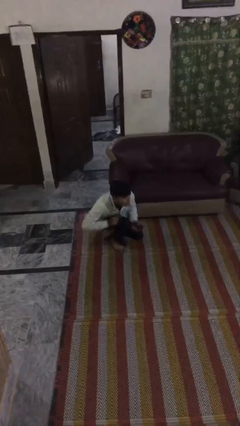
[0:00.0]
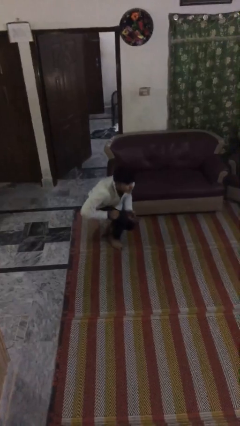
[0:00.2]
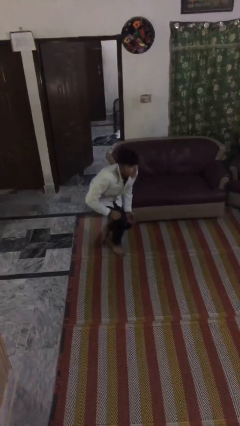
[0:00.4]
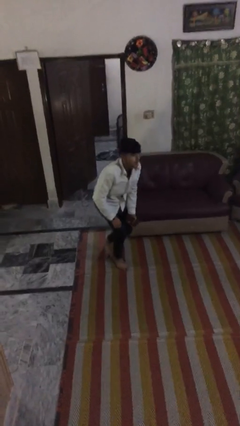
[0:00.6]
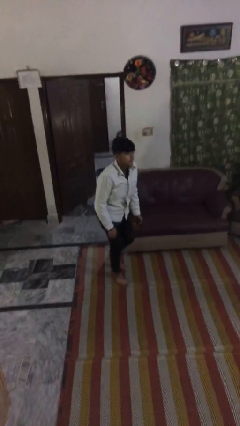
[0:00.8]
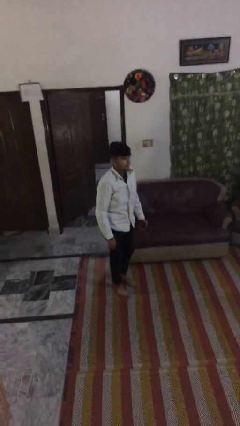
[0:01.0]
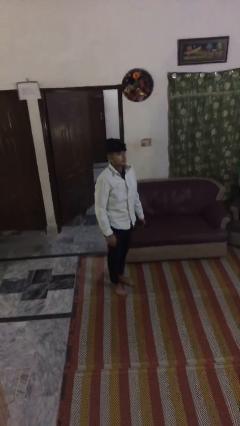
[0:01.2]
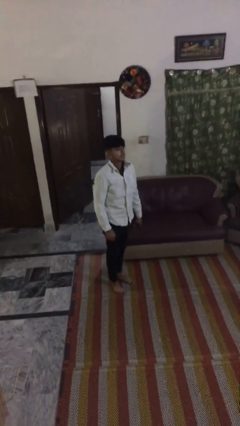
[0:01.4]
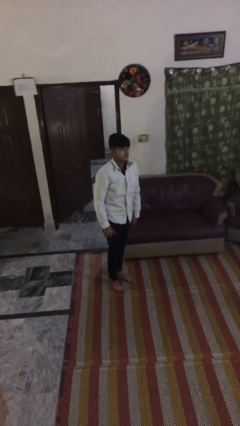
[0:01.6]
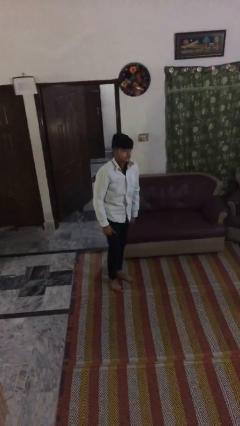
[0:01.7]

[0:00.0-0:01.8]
person stands up

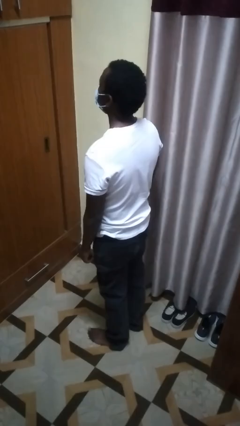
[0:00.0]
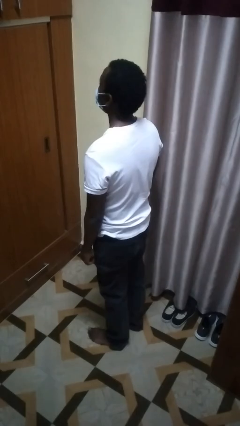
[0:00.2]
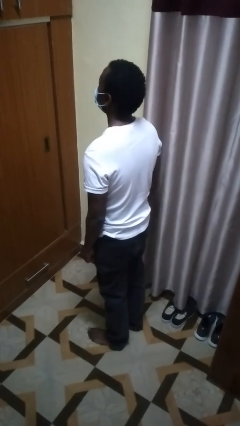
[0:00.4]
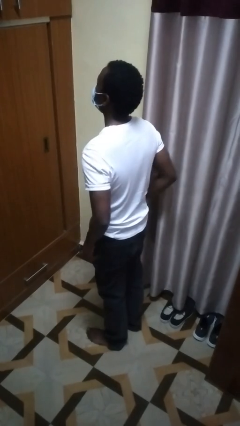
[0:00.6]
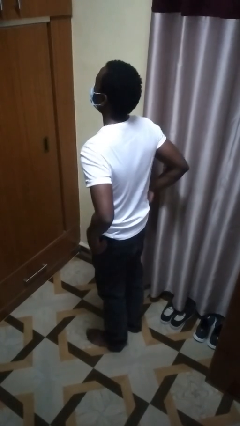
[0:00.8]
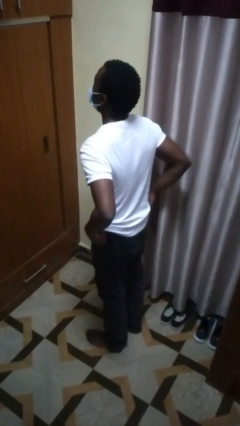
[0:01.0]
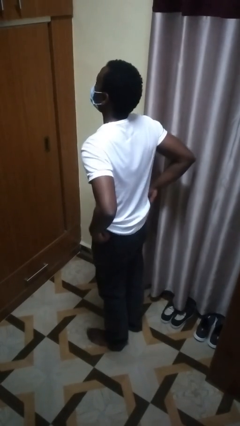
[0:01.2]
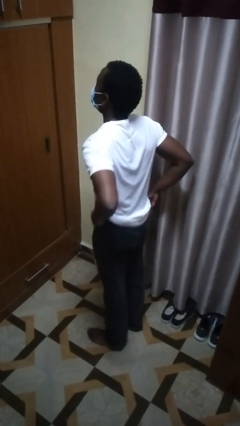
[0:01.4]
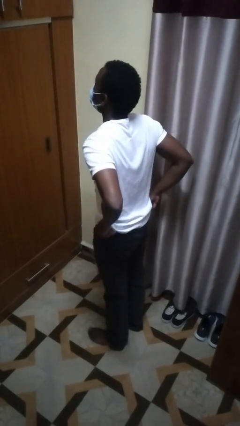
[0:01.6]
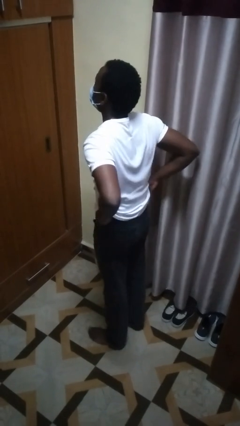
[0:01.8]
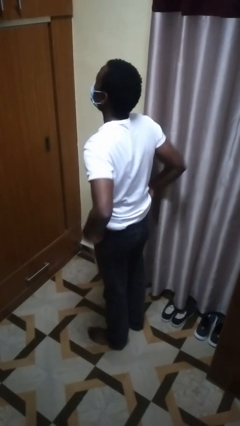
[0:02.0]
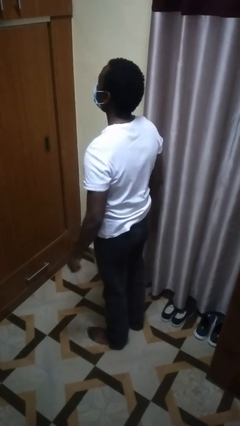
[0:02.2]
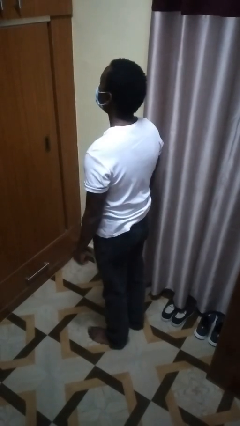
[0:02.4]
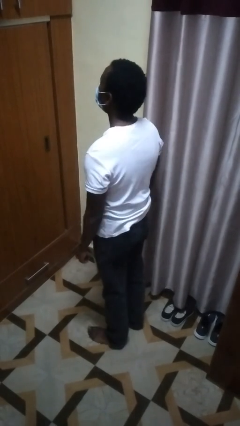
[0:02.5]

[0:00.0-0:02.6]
person hikes up pants

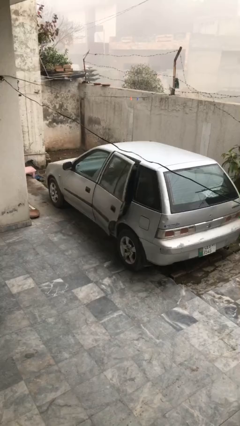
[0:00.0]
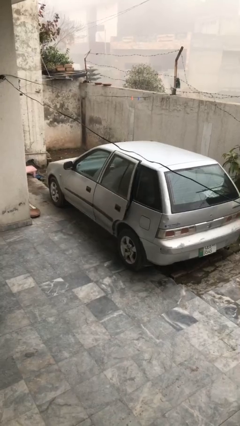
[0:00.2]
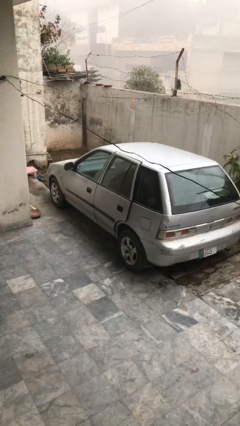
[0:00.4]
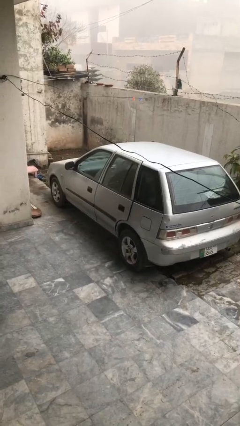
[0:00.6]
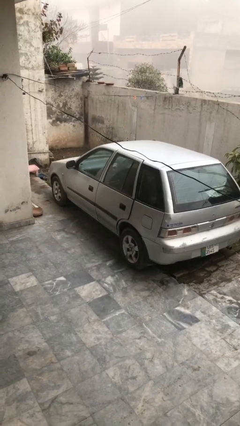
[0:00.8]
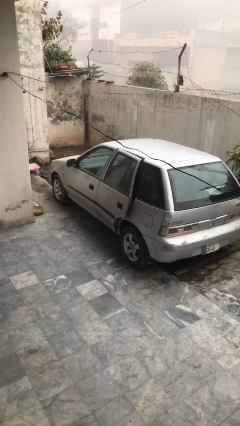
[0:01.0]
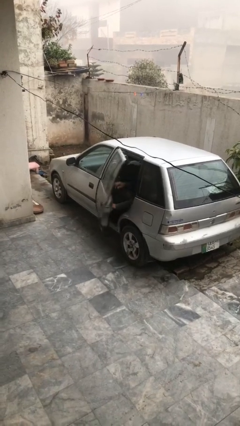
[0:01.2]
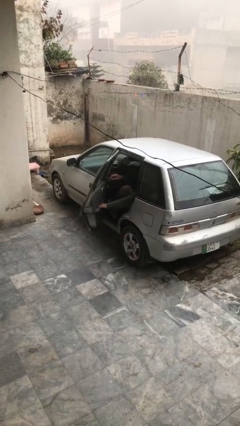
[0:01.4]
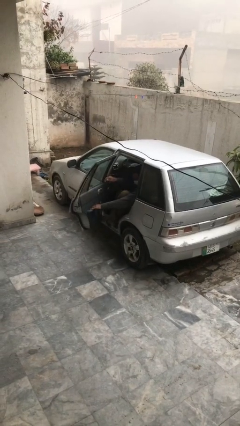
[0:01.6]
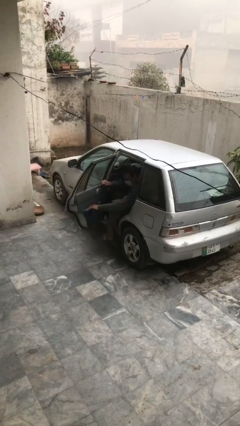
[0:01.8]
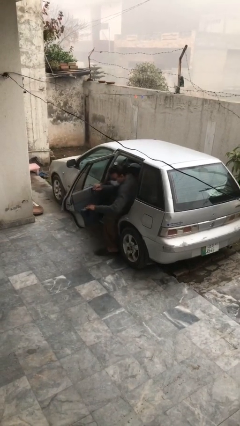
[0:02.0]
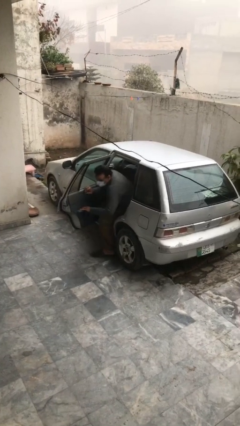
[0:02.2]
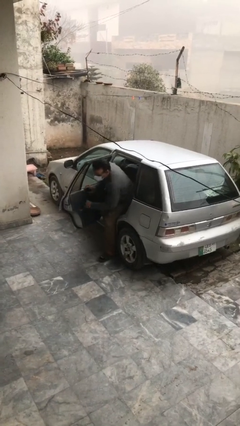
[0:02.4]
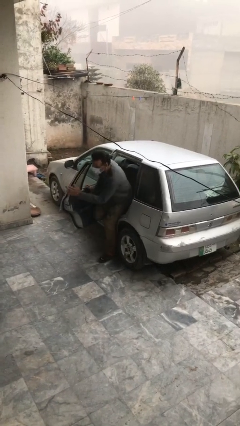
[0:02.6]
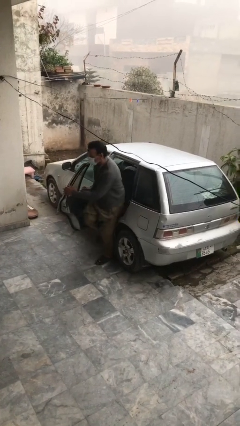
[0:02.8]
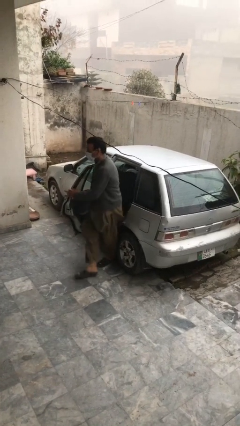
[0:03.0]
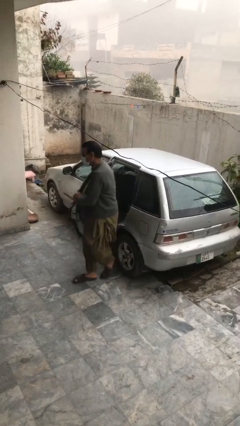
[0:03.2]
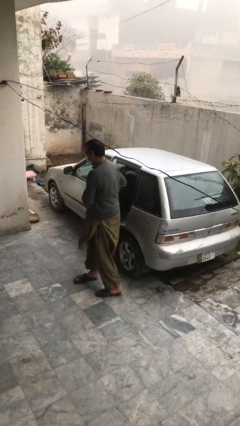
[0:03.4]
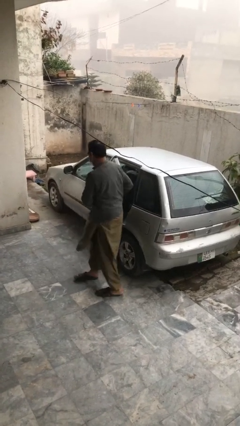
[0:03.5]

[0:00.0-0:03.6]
car drops off person

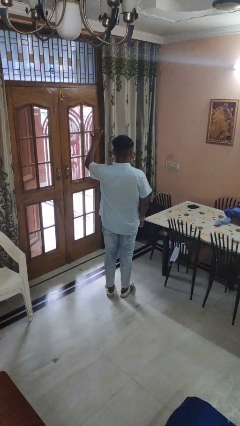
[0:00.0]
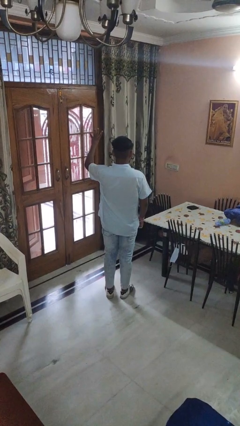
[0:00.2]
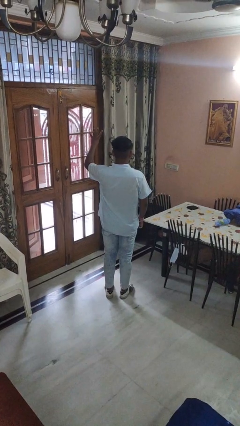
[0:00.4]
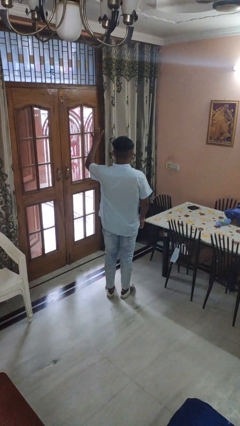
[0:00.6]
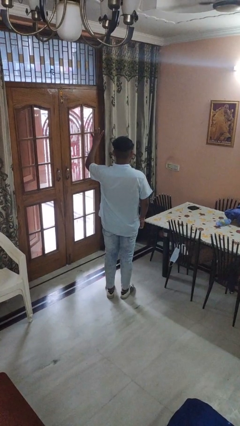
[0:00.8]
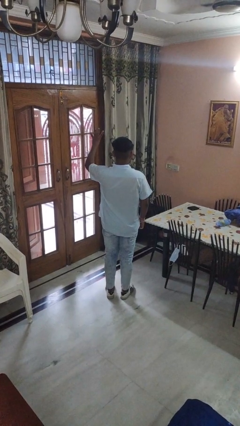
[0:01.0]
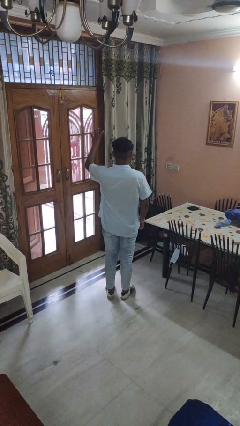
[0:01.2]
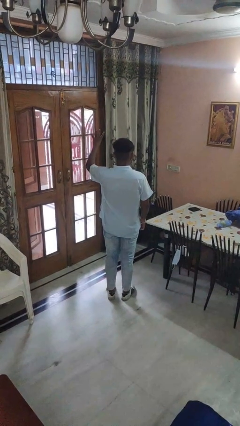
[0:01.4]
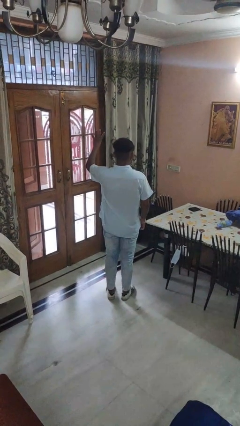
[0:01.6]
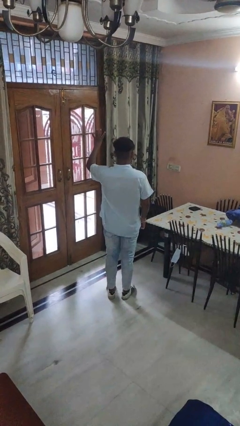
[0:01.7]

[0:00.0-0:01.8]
person gestures number four

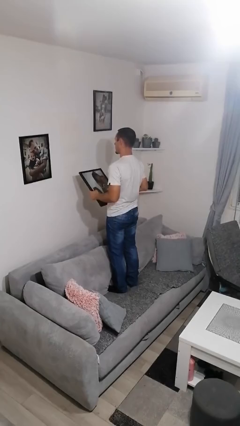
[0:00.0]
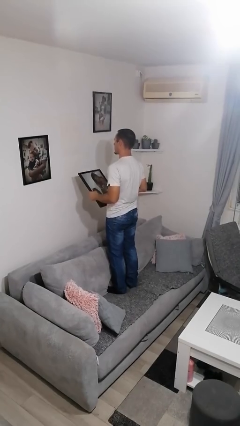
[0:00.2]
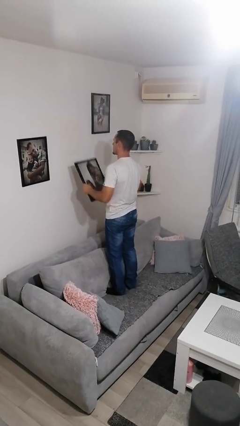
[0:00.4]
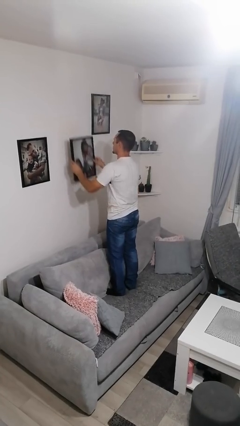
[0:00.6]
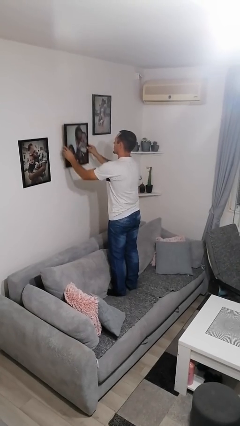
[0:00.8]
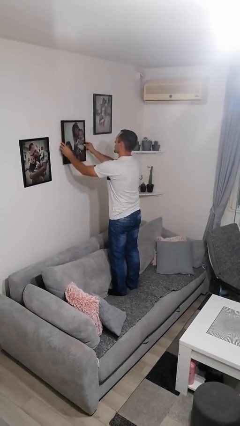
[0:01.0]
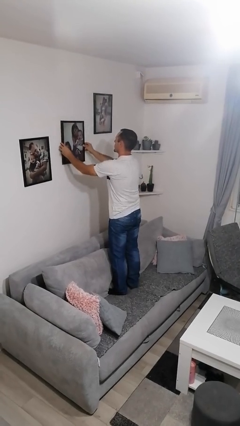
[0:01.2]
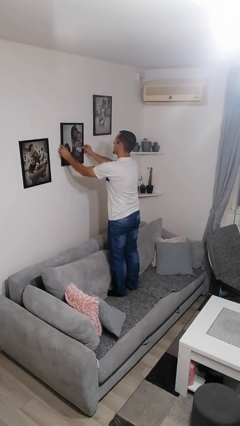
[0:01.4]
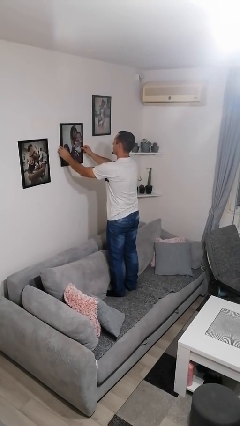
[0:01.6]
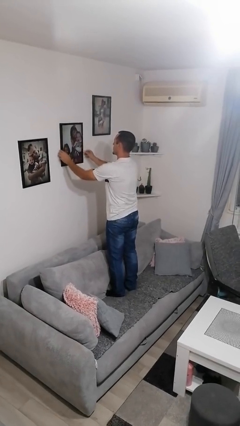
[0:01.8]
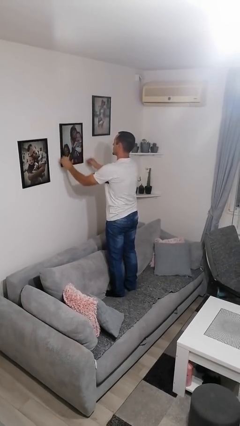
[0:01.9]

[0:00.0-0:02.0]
person puts up picture frame

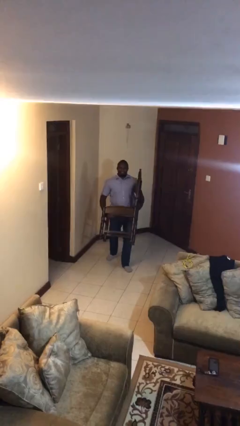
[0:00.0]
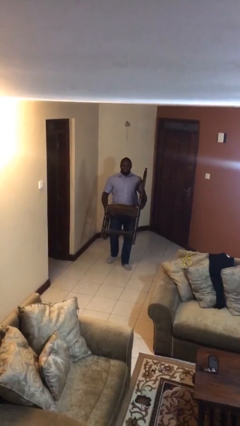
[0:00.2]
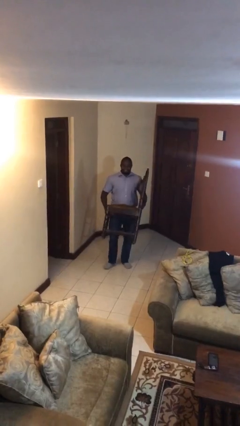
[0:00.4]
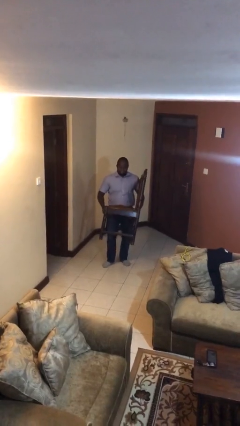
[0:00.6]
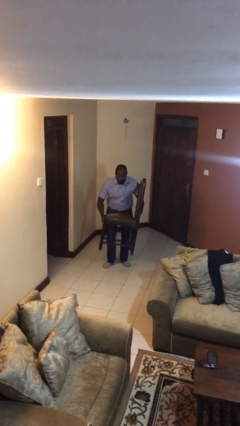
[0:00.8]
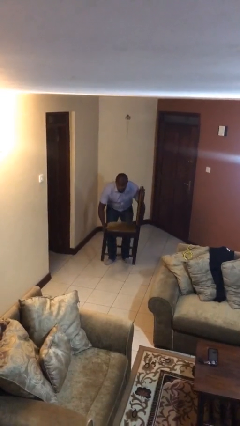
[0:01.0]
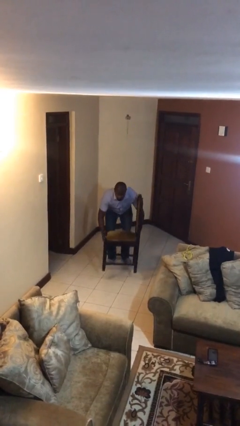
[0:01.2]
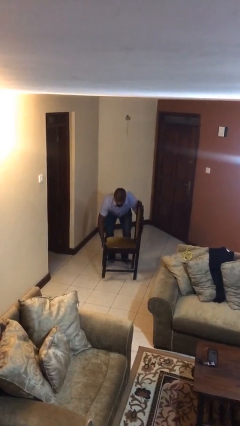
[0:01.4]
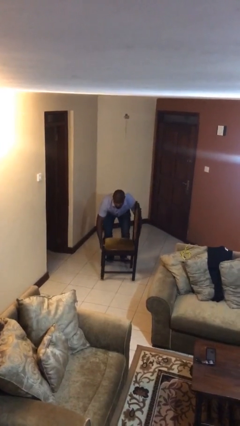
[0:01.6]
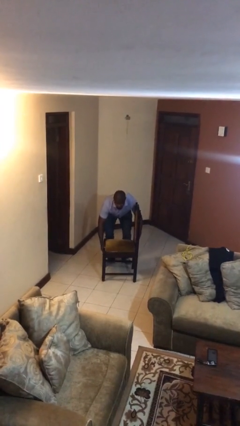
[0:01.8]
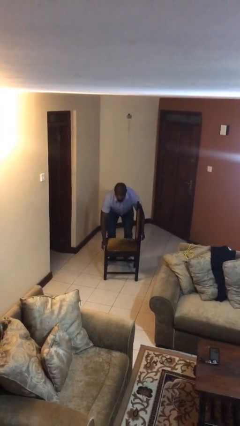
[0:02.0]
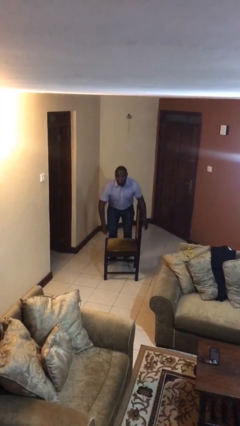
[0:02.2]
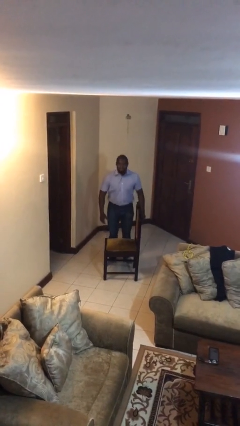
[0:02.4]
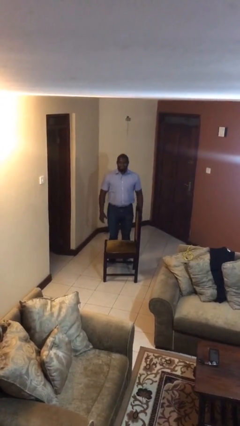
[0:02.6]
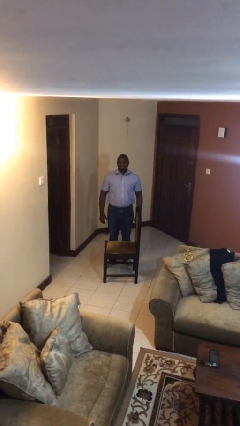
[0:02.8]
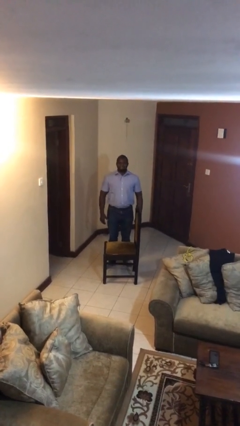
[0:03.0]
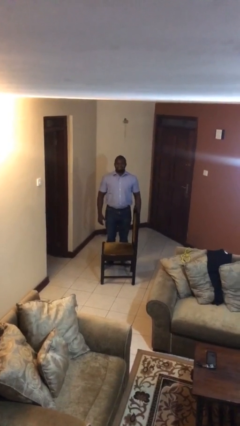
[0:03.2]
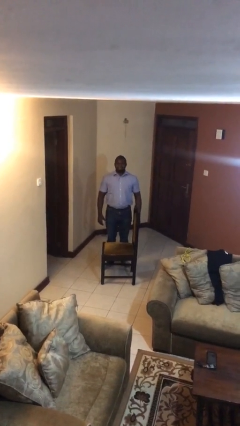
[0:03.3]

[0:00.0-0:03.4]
person puts down object on floor

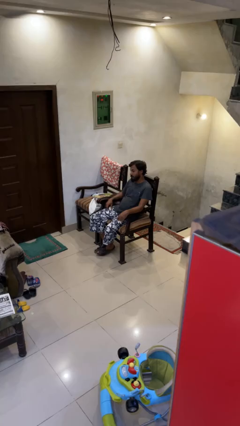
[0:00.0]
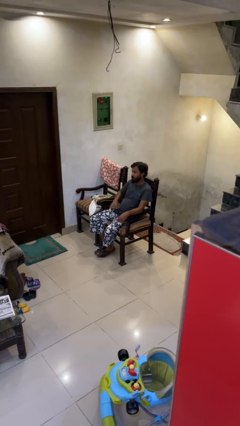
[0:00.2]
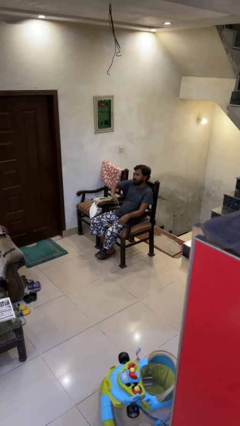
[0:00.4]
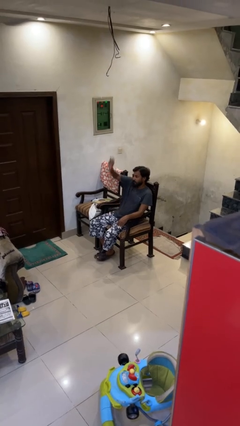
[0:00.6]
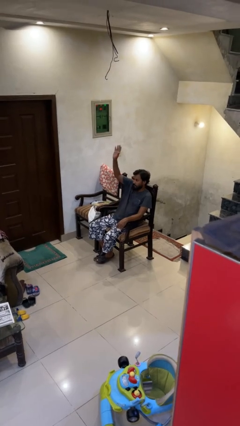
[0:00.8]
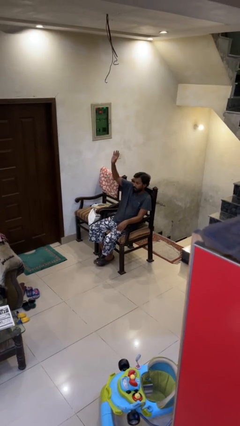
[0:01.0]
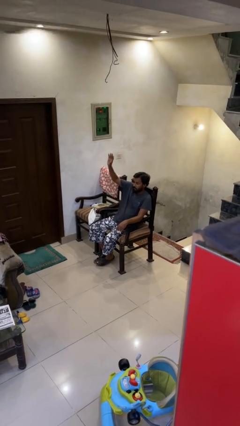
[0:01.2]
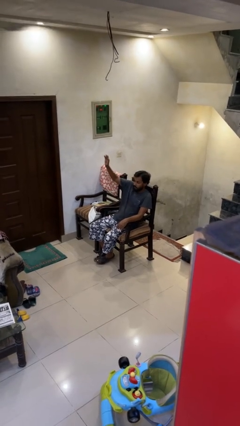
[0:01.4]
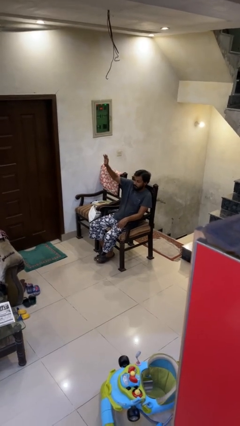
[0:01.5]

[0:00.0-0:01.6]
person gestures swipe up
